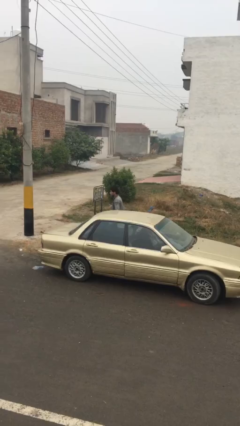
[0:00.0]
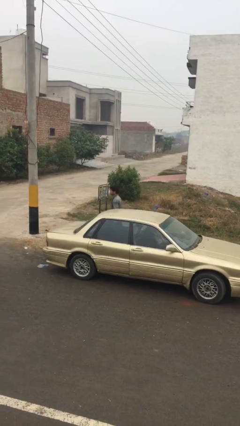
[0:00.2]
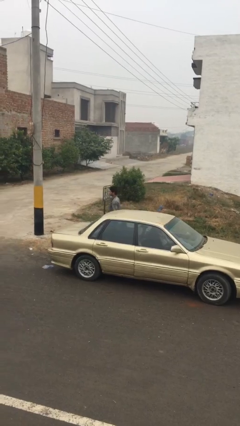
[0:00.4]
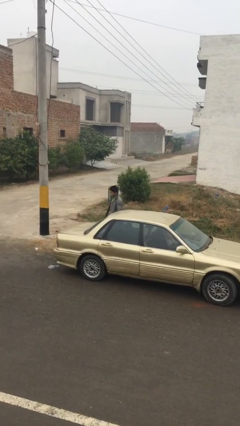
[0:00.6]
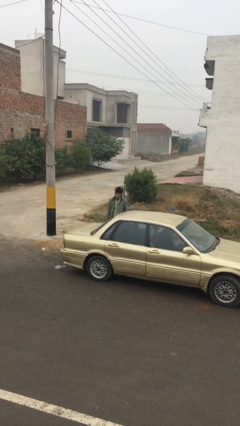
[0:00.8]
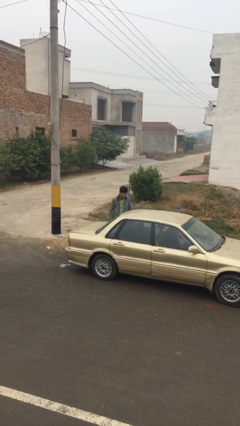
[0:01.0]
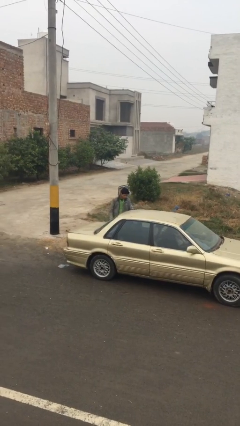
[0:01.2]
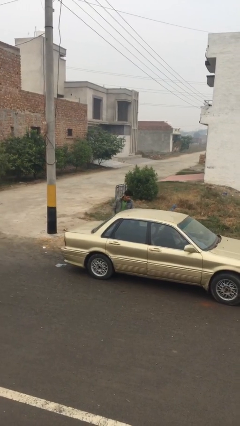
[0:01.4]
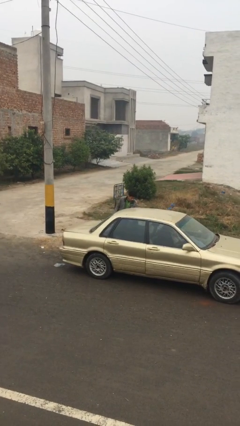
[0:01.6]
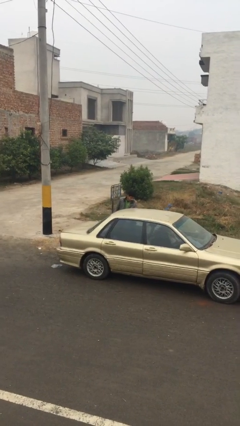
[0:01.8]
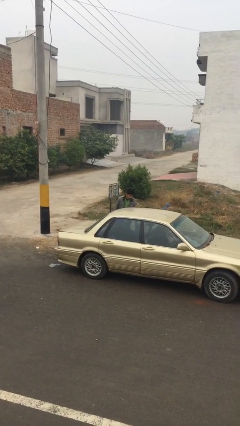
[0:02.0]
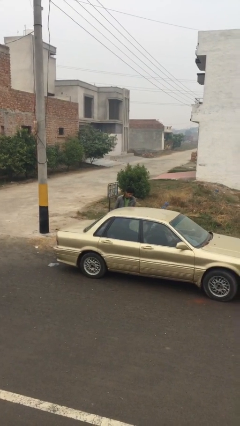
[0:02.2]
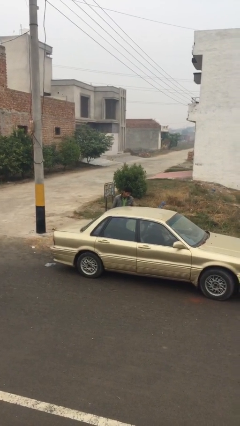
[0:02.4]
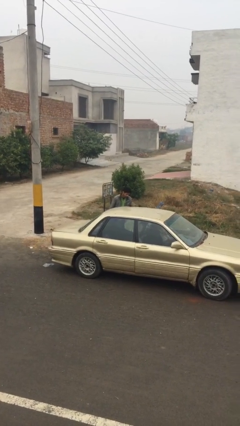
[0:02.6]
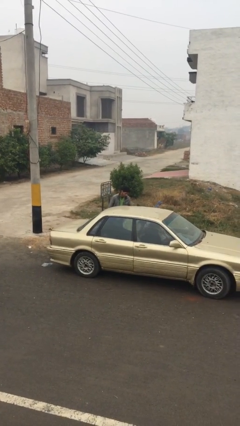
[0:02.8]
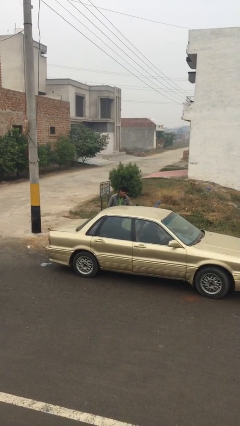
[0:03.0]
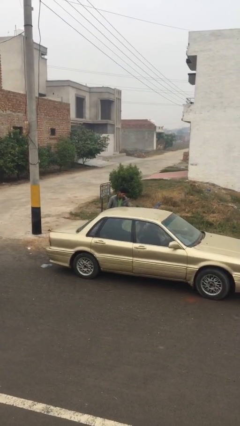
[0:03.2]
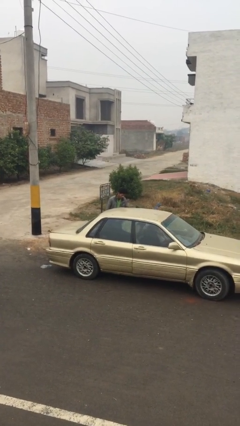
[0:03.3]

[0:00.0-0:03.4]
person opens car door

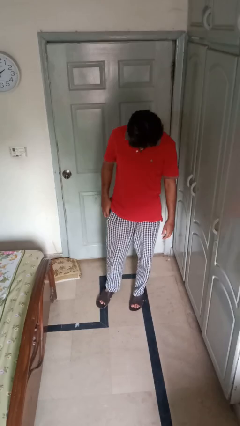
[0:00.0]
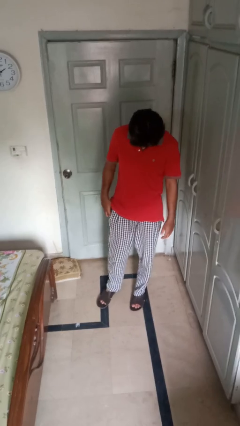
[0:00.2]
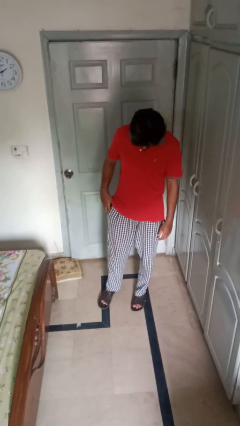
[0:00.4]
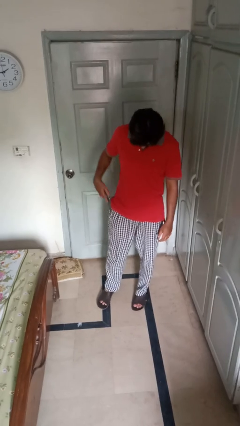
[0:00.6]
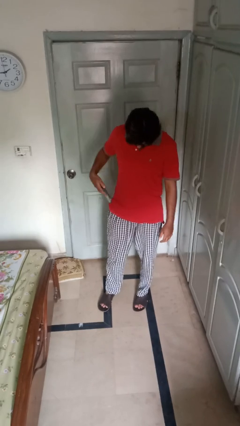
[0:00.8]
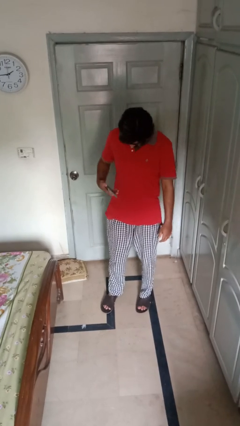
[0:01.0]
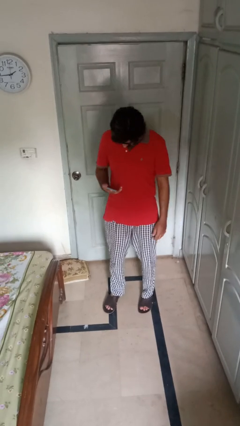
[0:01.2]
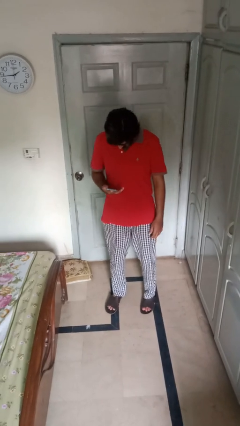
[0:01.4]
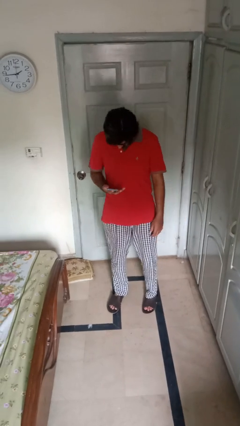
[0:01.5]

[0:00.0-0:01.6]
person takes phone from pocket

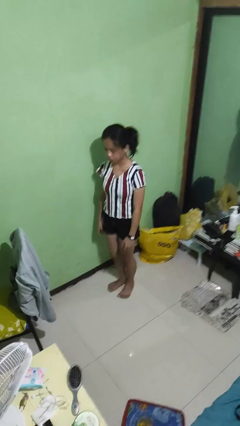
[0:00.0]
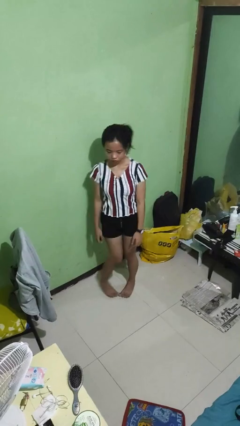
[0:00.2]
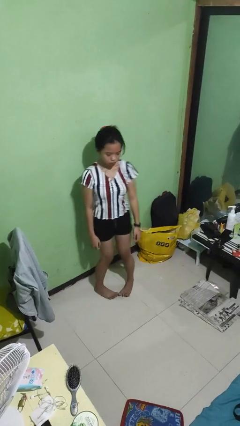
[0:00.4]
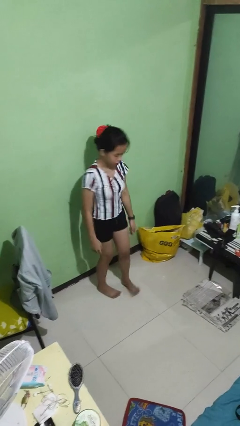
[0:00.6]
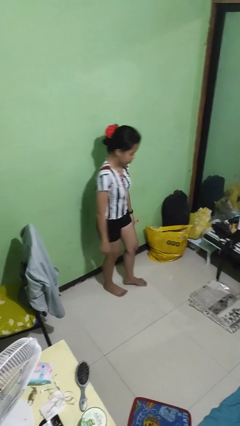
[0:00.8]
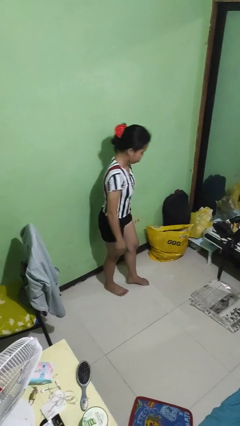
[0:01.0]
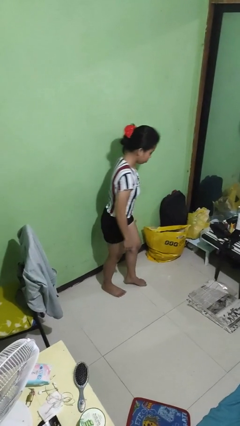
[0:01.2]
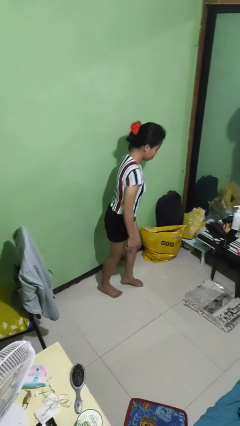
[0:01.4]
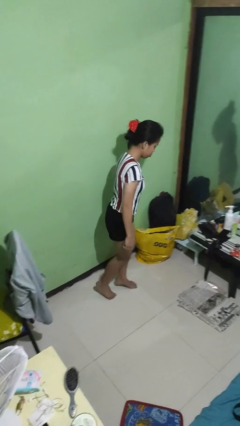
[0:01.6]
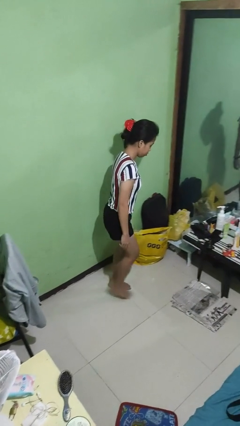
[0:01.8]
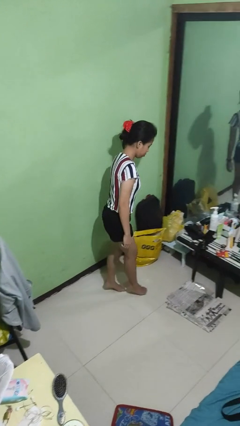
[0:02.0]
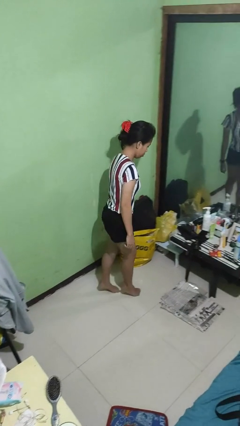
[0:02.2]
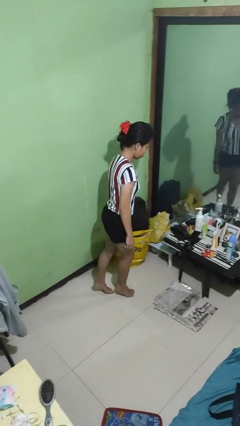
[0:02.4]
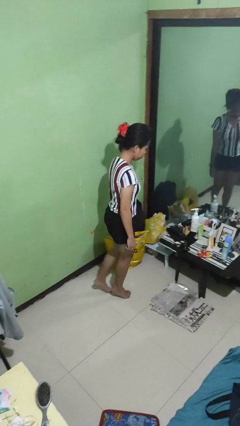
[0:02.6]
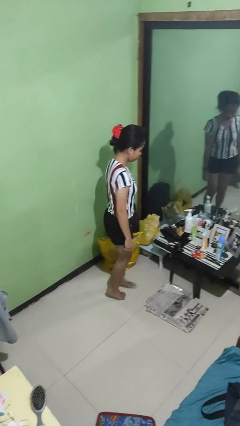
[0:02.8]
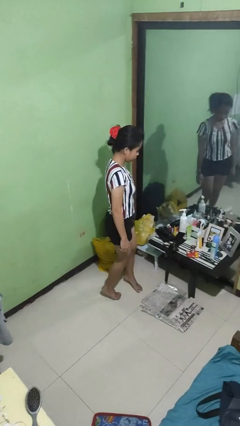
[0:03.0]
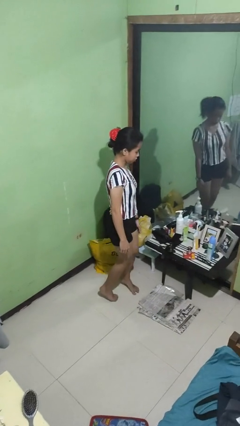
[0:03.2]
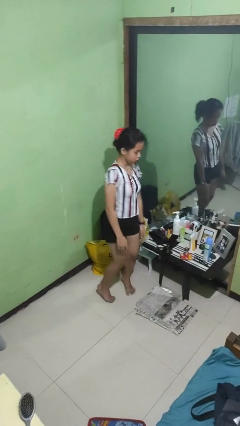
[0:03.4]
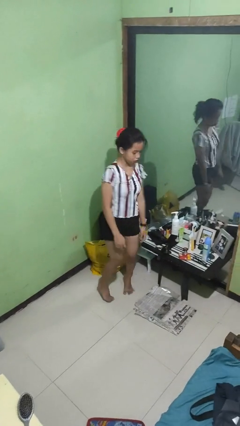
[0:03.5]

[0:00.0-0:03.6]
person walks tiptoe

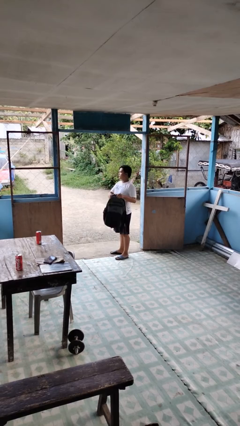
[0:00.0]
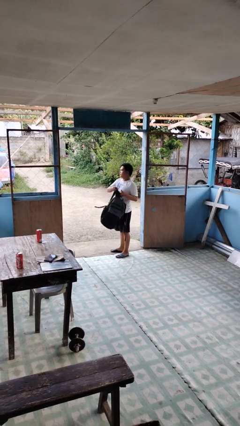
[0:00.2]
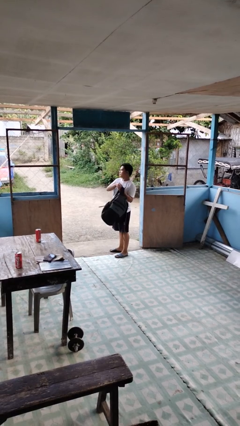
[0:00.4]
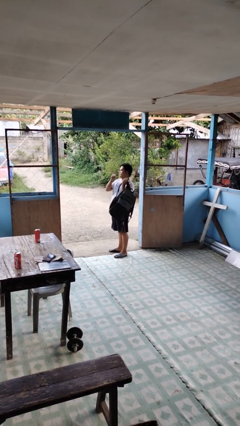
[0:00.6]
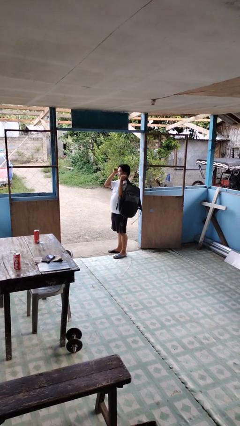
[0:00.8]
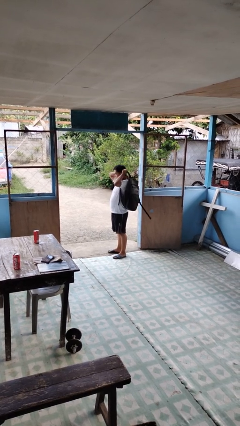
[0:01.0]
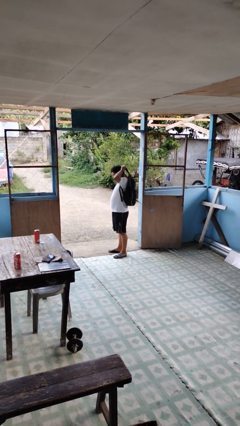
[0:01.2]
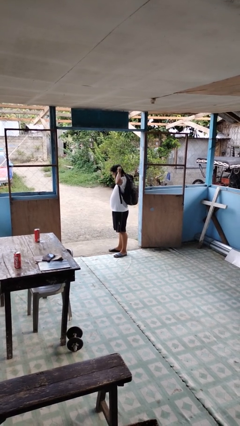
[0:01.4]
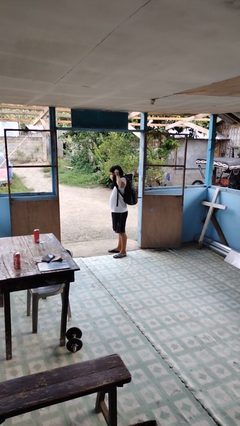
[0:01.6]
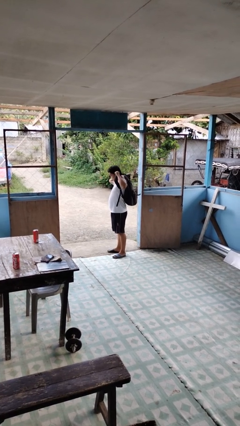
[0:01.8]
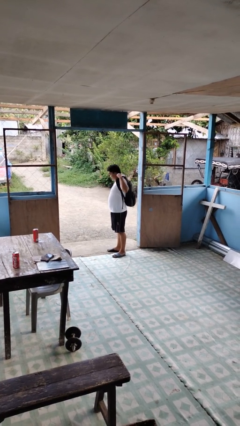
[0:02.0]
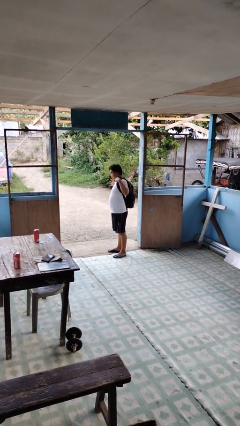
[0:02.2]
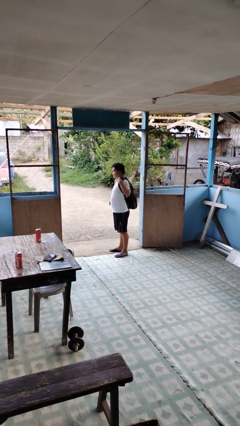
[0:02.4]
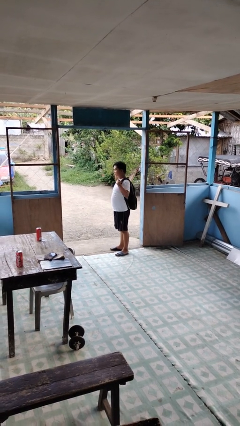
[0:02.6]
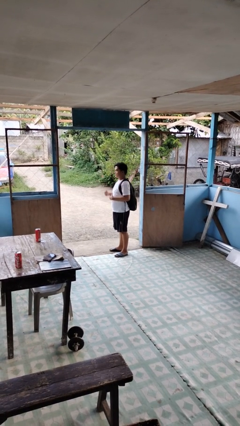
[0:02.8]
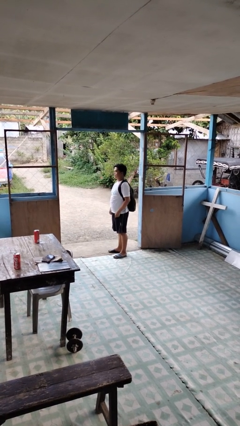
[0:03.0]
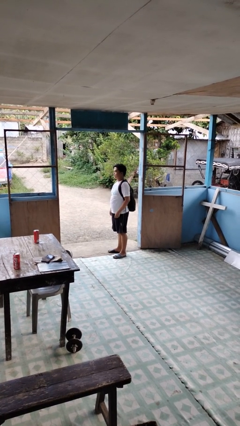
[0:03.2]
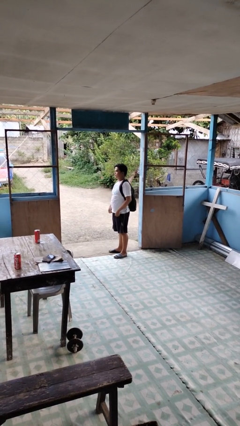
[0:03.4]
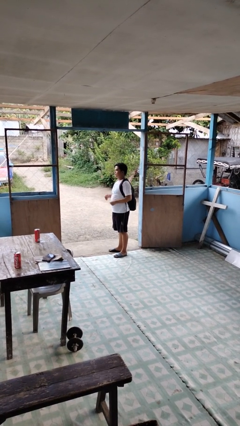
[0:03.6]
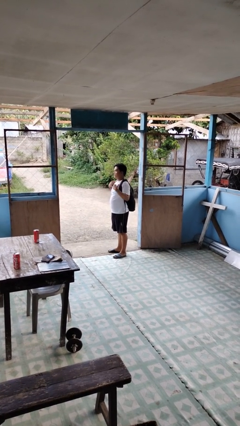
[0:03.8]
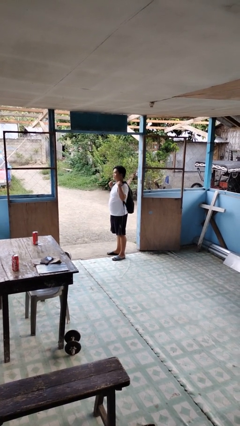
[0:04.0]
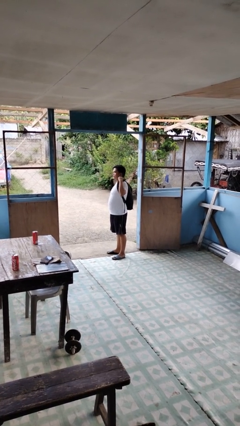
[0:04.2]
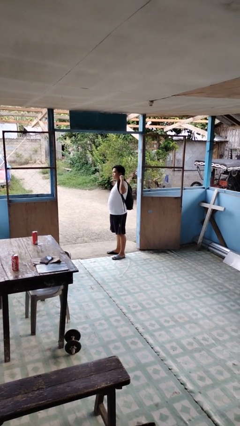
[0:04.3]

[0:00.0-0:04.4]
person puts on backpack

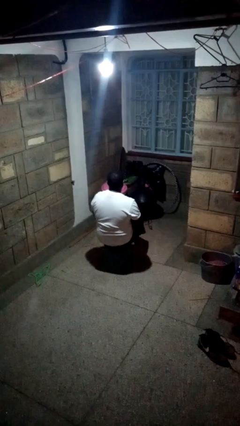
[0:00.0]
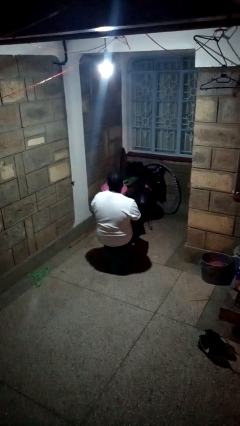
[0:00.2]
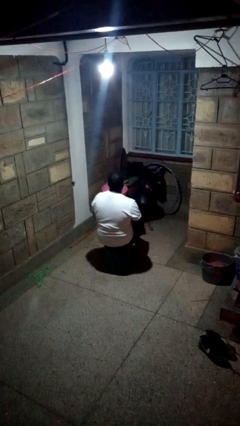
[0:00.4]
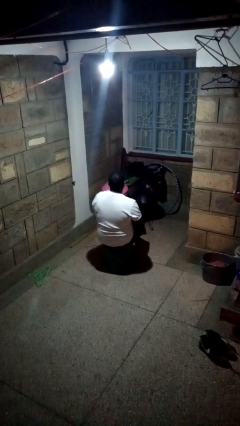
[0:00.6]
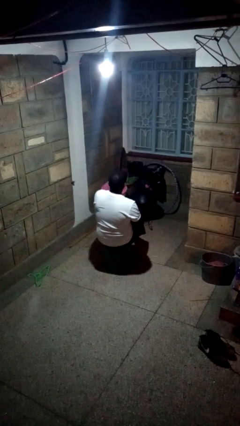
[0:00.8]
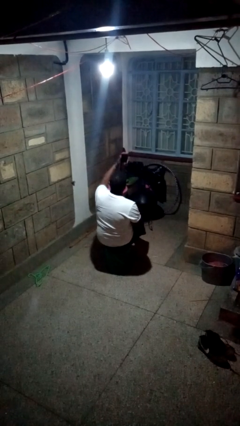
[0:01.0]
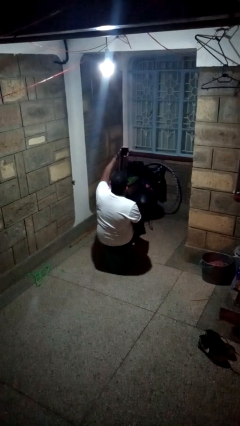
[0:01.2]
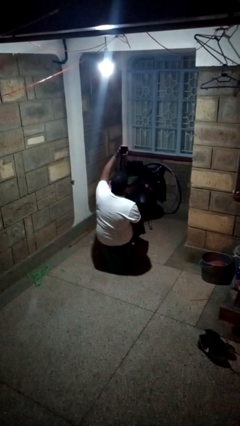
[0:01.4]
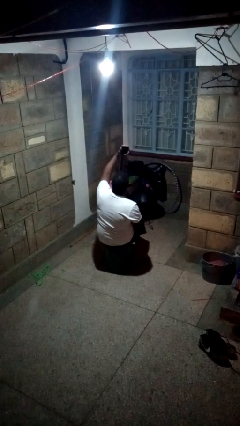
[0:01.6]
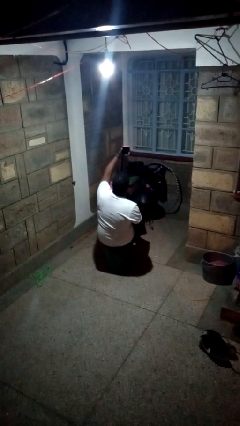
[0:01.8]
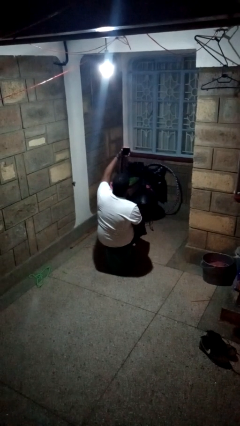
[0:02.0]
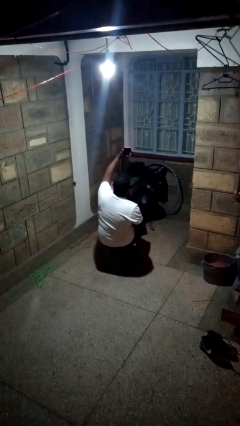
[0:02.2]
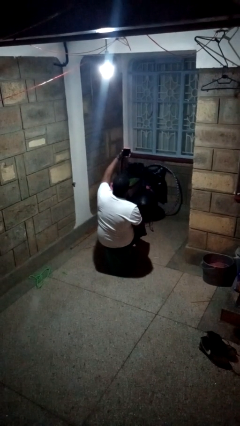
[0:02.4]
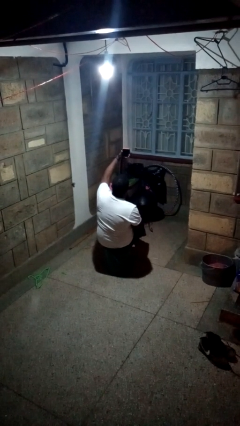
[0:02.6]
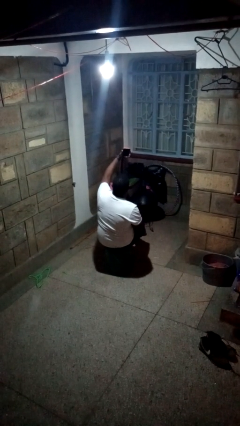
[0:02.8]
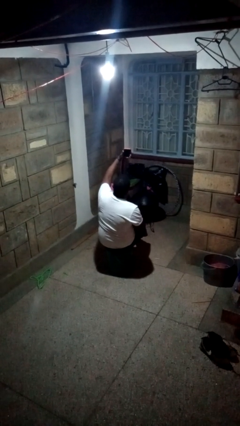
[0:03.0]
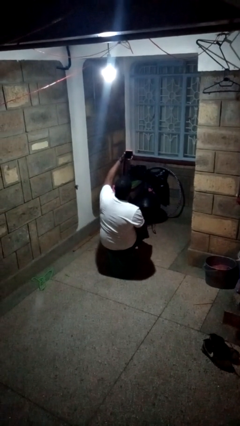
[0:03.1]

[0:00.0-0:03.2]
person takes selfie

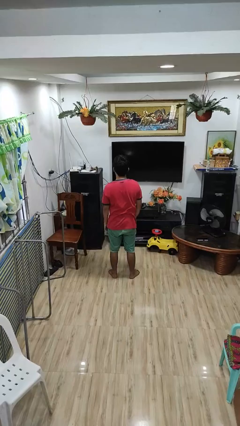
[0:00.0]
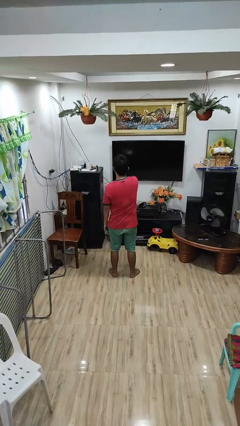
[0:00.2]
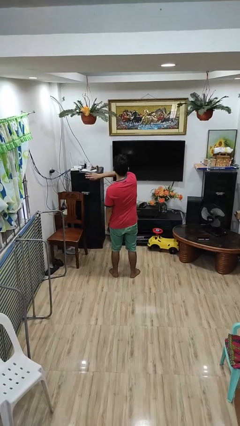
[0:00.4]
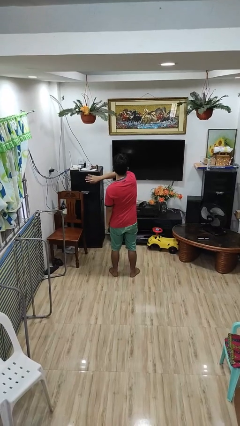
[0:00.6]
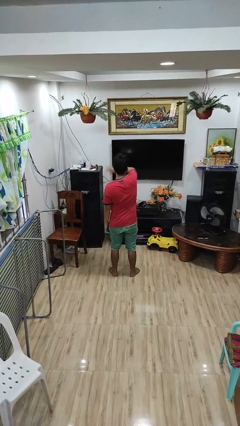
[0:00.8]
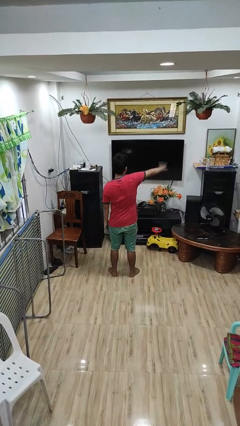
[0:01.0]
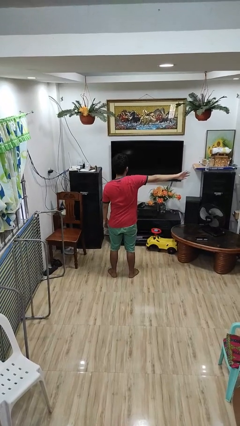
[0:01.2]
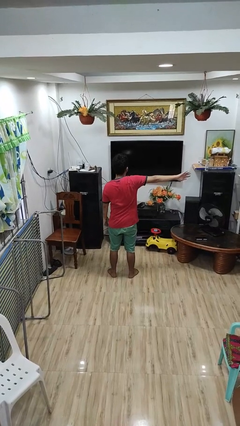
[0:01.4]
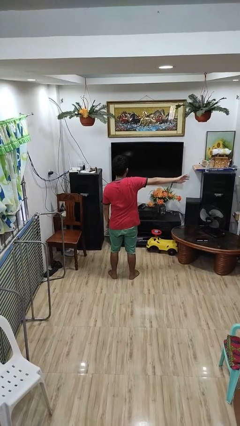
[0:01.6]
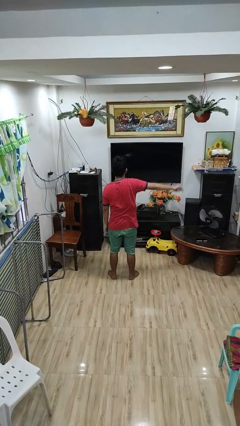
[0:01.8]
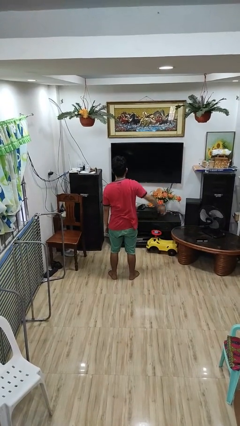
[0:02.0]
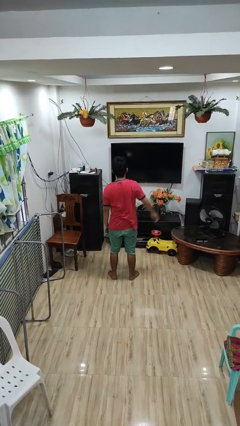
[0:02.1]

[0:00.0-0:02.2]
person gestures swipe right
